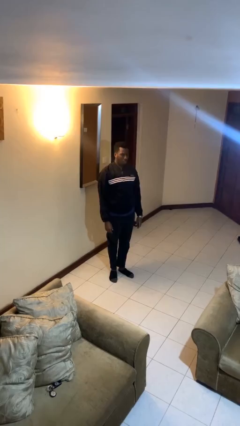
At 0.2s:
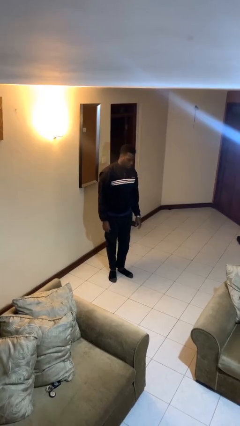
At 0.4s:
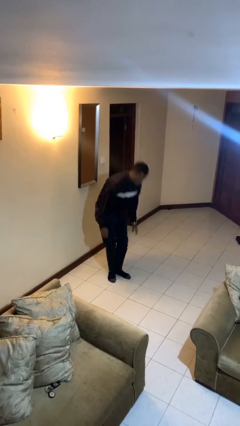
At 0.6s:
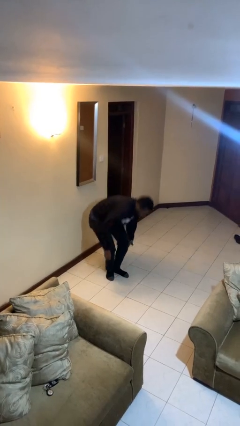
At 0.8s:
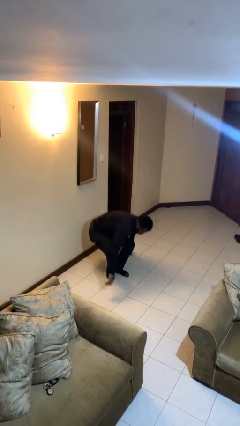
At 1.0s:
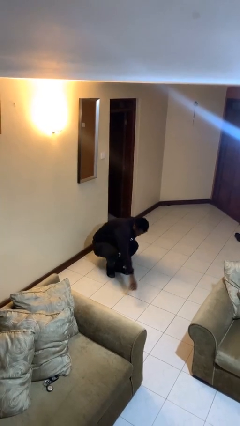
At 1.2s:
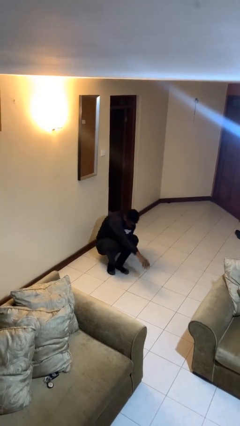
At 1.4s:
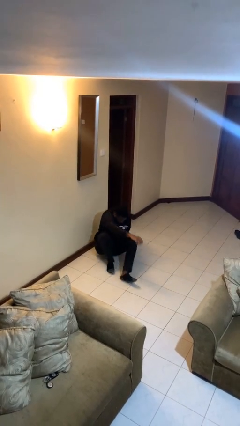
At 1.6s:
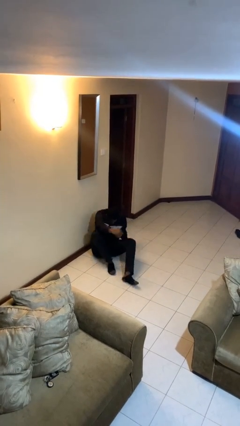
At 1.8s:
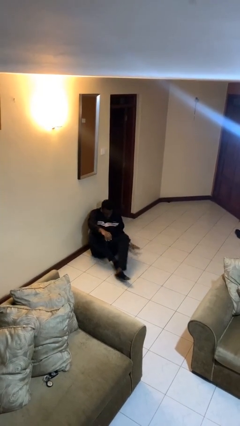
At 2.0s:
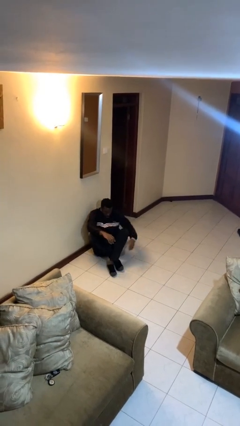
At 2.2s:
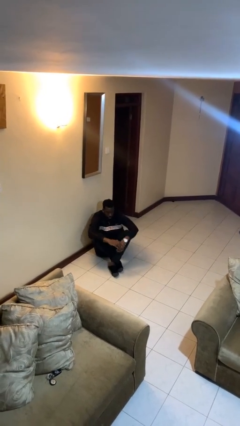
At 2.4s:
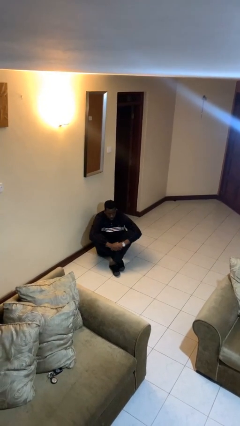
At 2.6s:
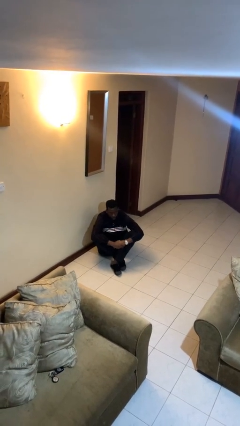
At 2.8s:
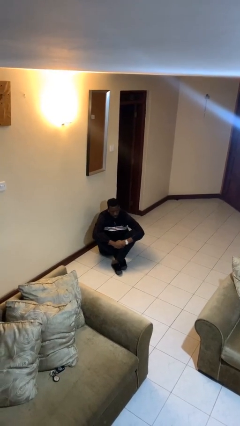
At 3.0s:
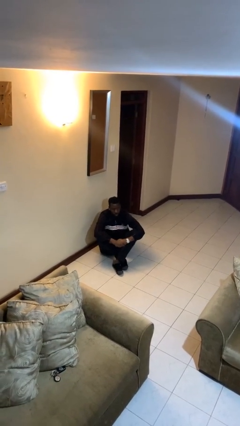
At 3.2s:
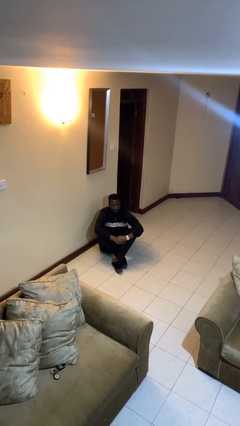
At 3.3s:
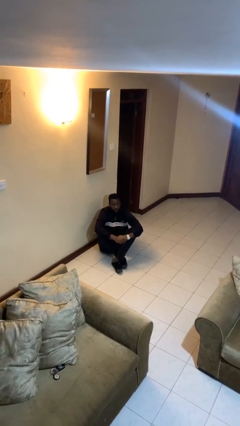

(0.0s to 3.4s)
person sits crisscross

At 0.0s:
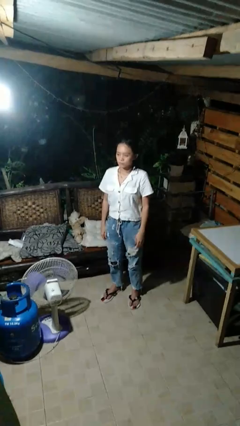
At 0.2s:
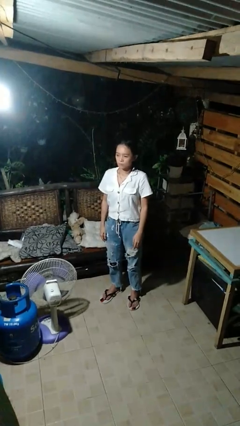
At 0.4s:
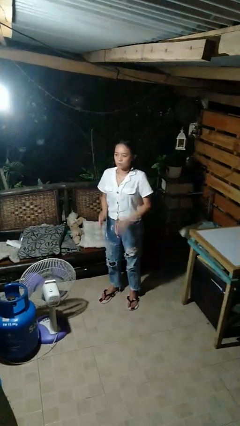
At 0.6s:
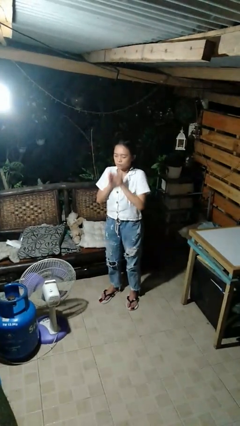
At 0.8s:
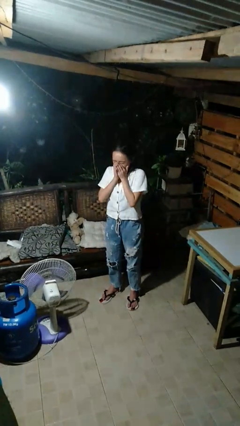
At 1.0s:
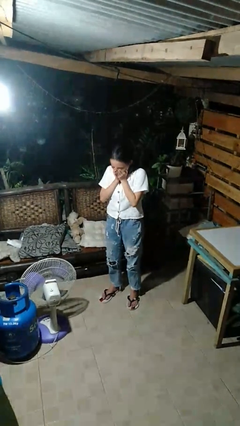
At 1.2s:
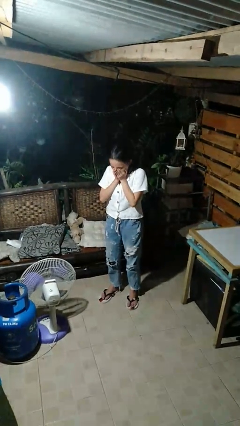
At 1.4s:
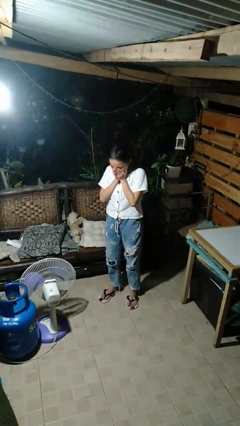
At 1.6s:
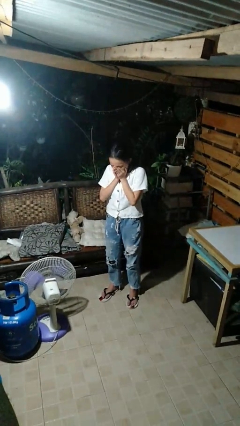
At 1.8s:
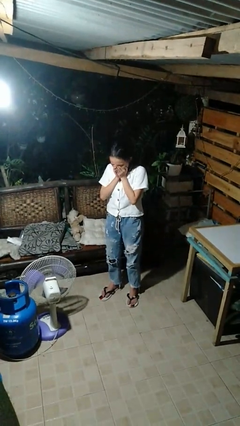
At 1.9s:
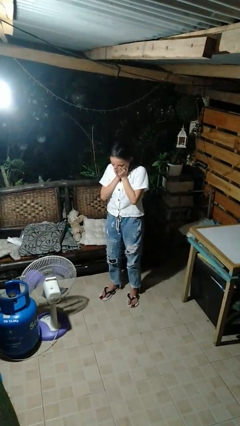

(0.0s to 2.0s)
person sneezes into hand

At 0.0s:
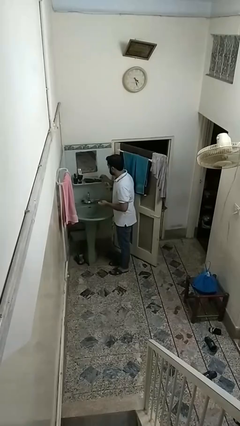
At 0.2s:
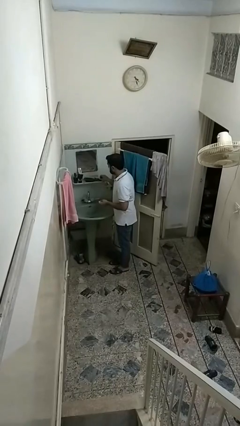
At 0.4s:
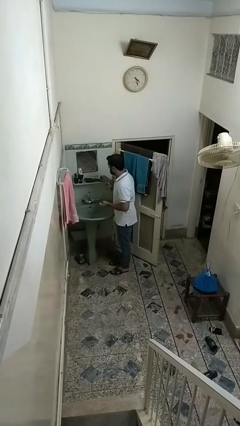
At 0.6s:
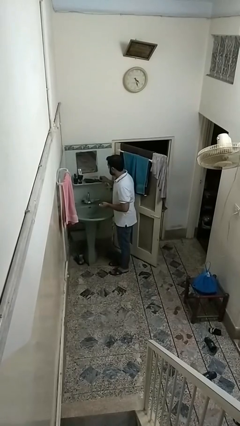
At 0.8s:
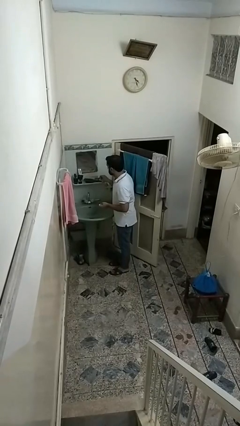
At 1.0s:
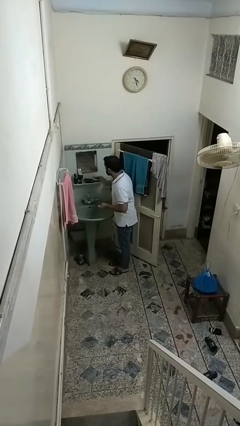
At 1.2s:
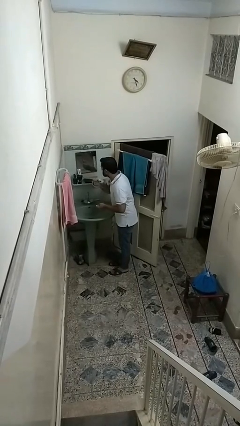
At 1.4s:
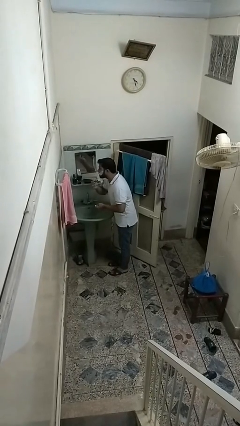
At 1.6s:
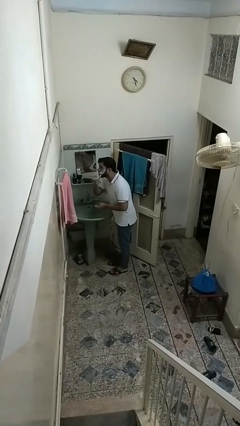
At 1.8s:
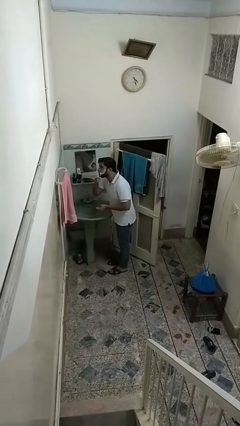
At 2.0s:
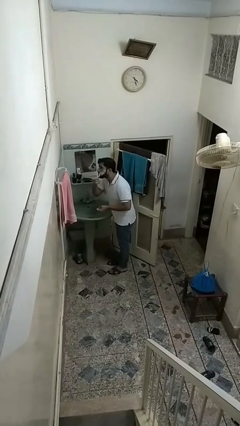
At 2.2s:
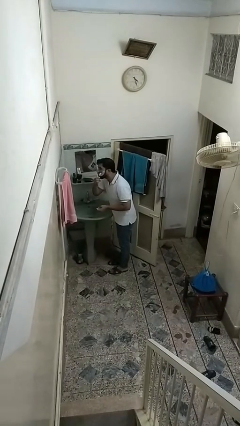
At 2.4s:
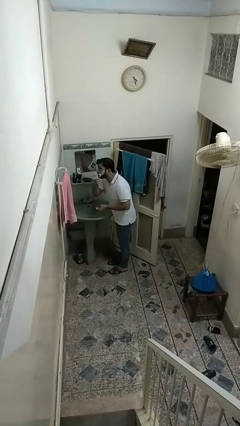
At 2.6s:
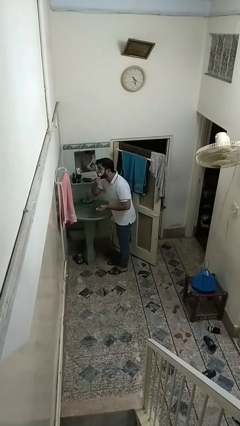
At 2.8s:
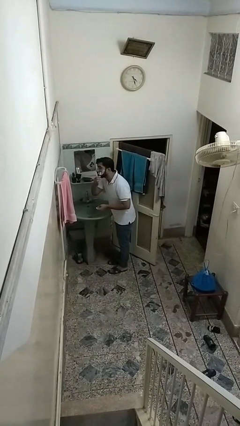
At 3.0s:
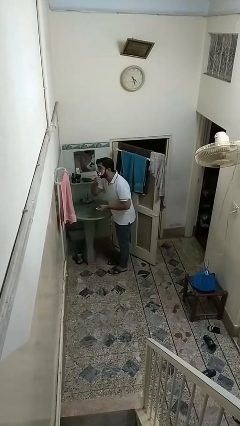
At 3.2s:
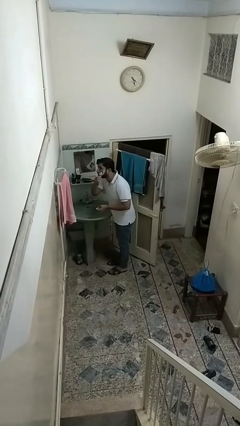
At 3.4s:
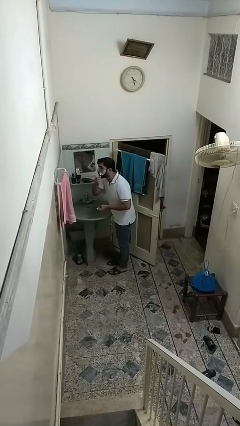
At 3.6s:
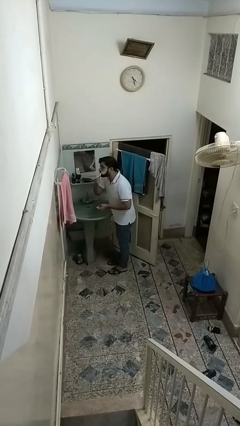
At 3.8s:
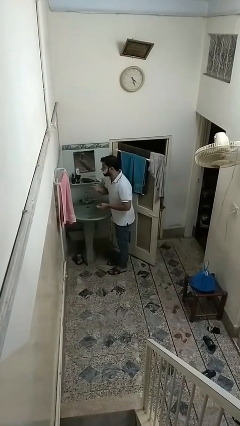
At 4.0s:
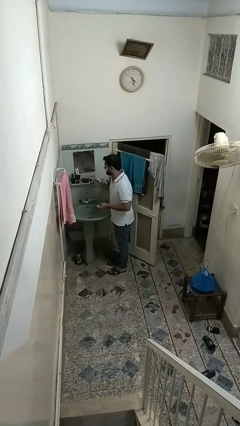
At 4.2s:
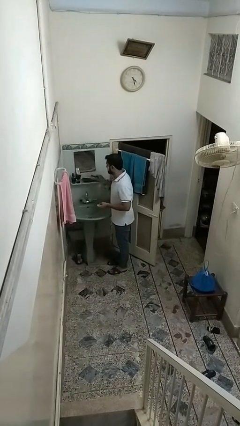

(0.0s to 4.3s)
person shaves face

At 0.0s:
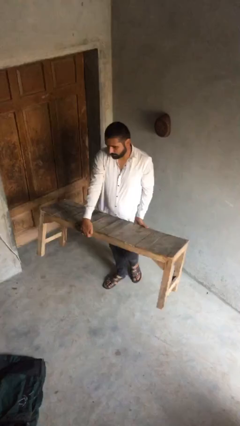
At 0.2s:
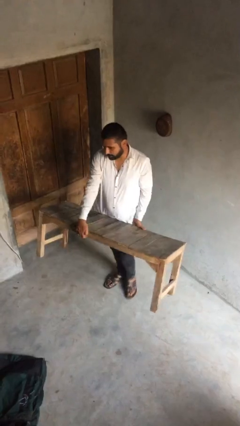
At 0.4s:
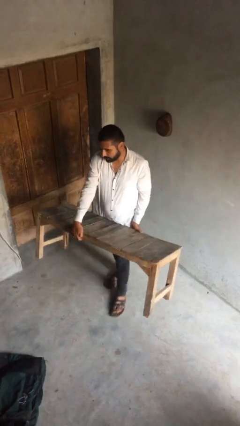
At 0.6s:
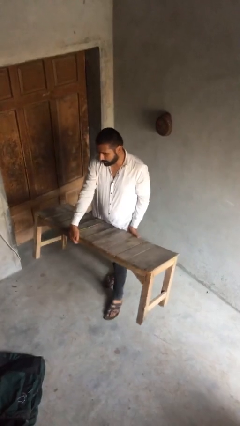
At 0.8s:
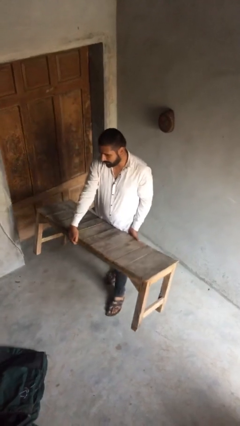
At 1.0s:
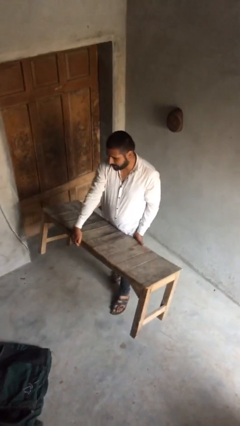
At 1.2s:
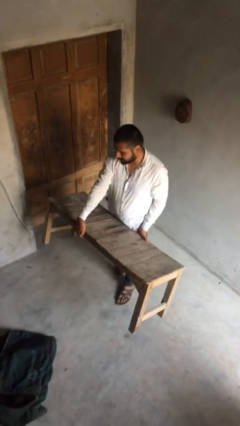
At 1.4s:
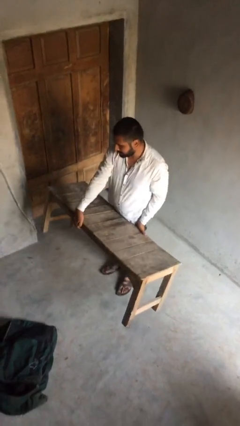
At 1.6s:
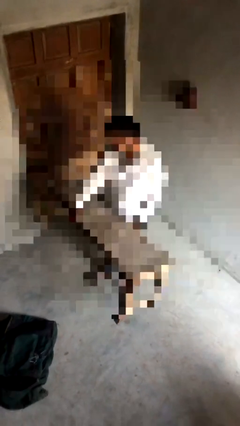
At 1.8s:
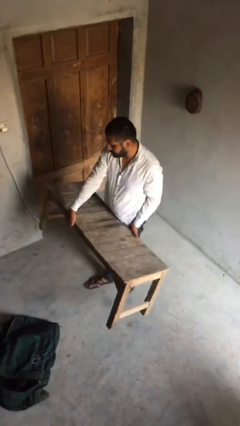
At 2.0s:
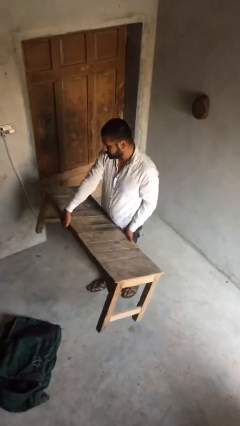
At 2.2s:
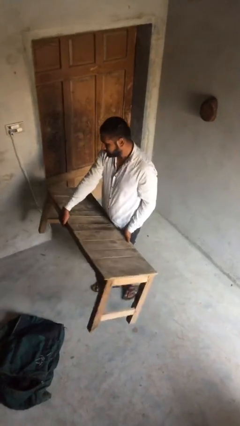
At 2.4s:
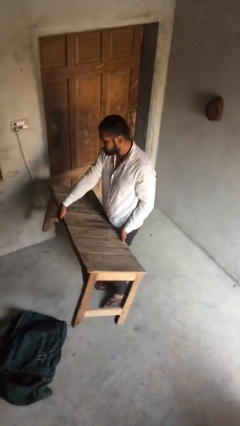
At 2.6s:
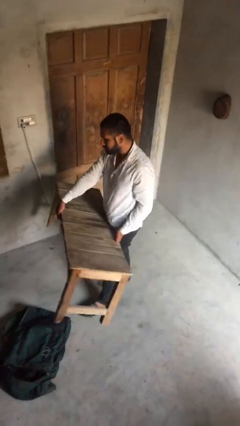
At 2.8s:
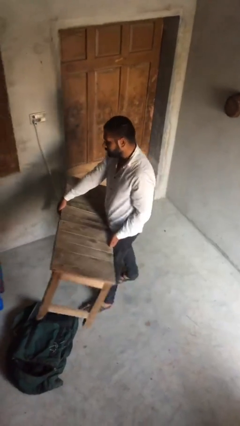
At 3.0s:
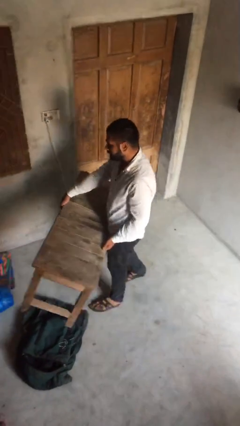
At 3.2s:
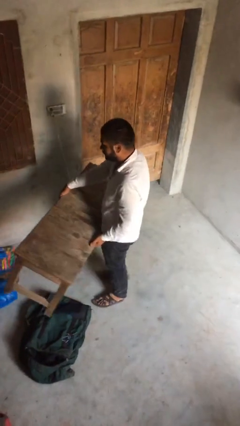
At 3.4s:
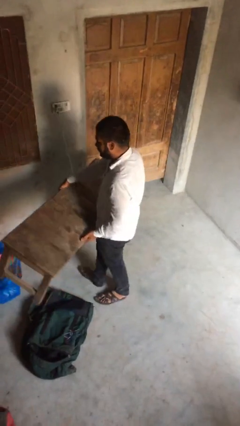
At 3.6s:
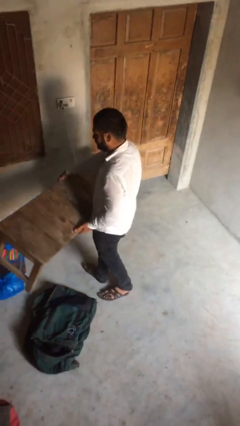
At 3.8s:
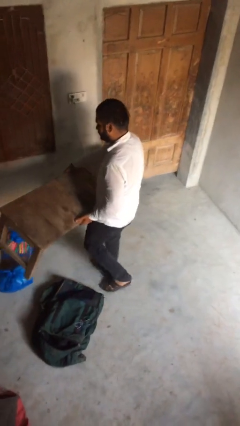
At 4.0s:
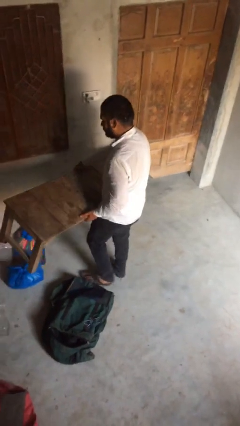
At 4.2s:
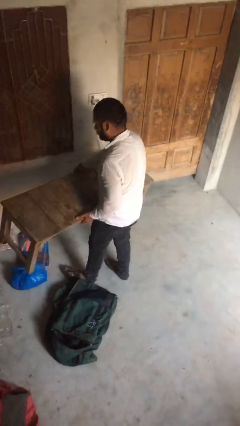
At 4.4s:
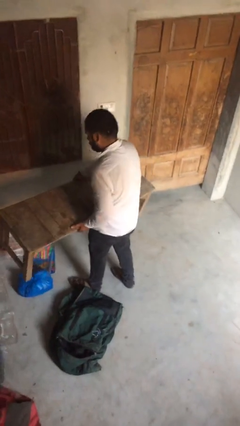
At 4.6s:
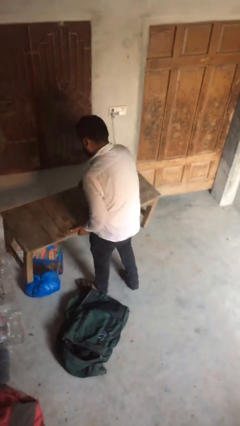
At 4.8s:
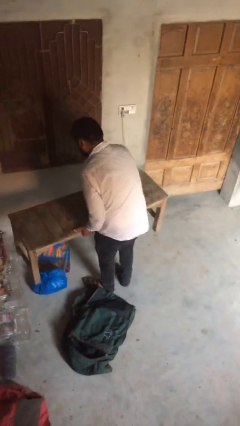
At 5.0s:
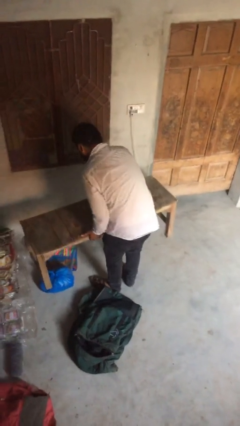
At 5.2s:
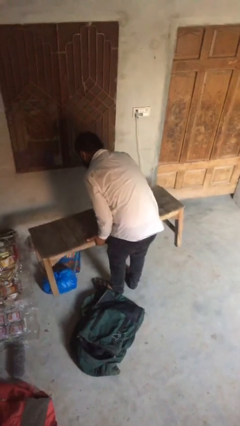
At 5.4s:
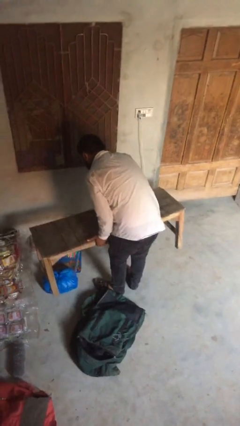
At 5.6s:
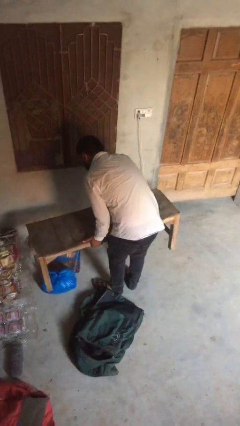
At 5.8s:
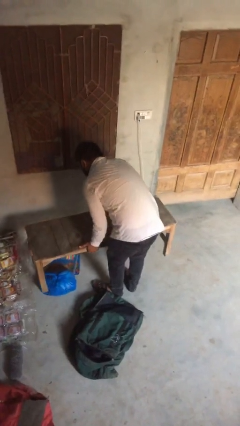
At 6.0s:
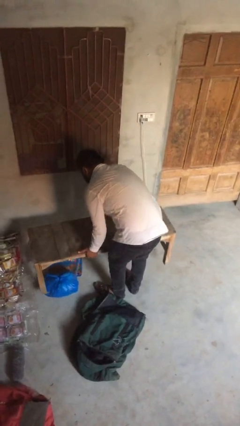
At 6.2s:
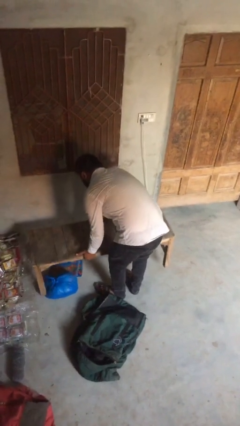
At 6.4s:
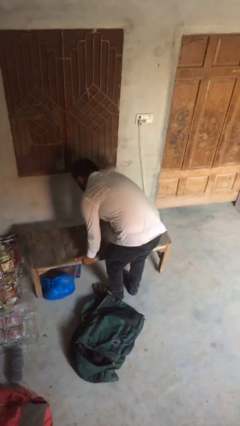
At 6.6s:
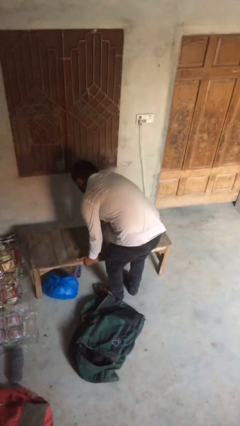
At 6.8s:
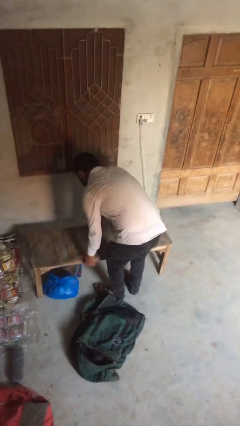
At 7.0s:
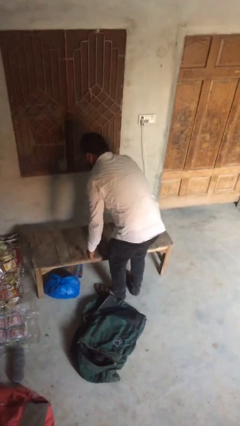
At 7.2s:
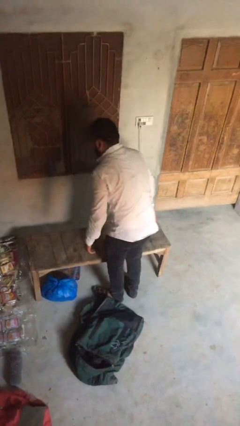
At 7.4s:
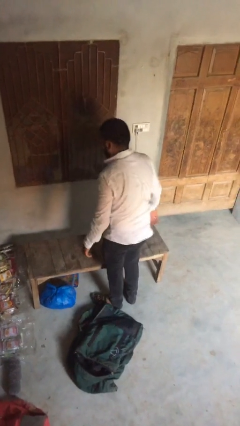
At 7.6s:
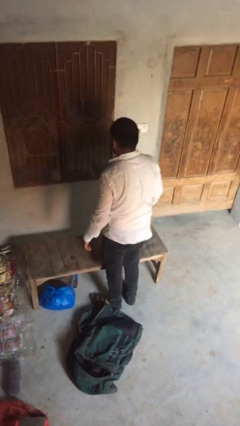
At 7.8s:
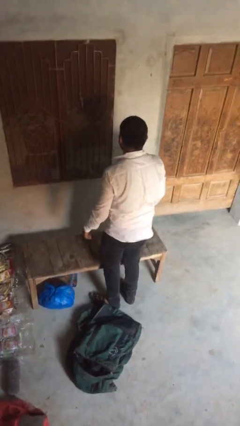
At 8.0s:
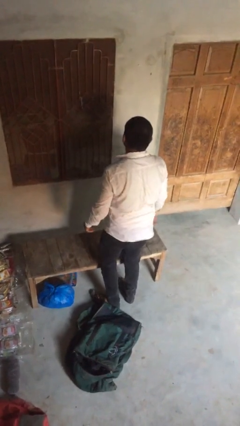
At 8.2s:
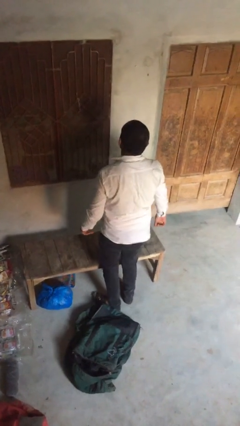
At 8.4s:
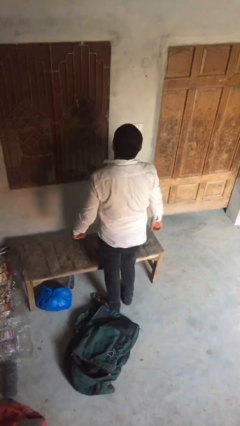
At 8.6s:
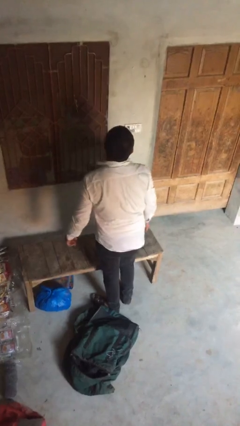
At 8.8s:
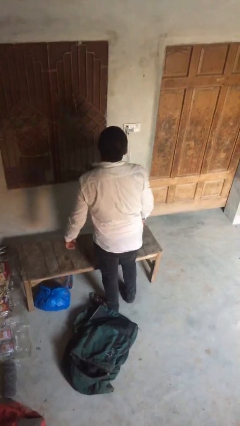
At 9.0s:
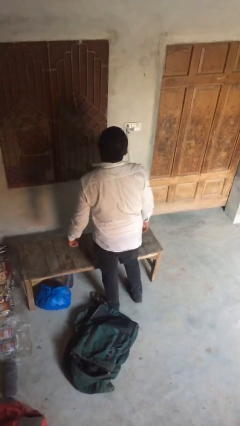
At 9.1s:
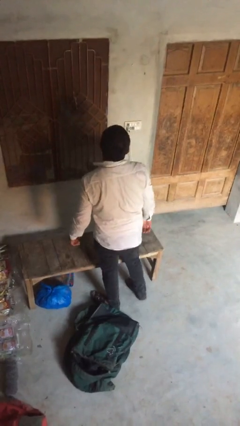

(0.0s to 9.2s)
person puts down object on floor
